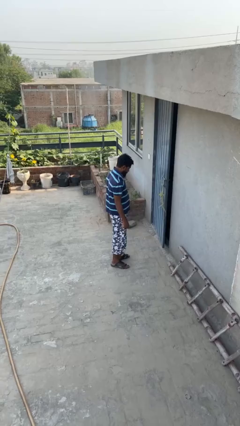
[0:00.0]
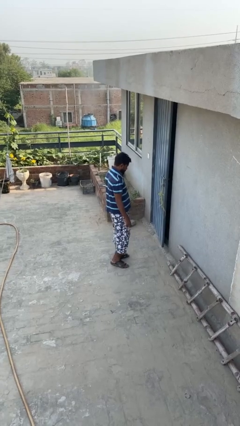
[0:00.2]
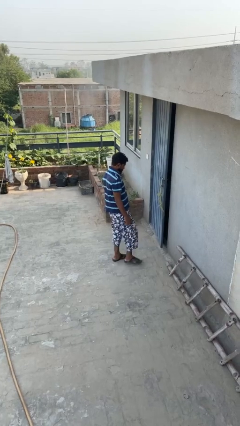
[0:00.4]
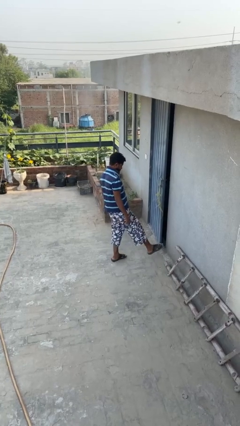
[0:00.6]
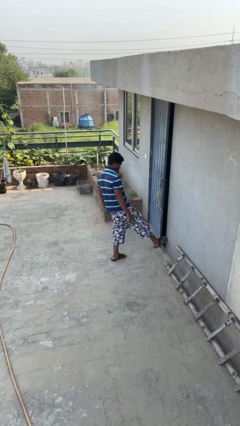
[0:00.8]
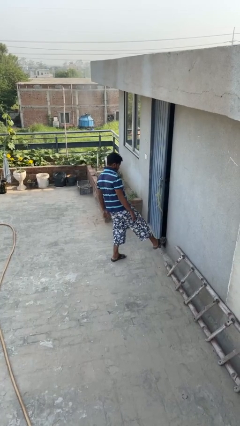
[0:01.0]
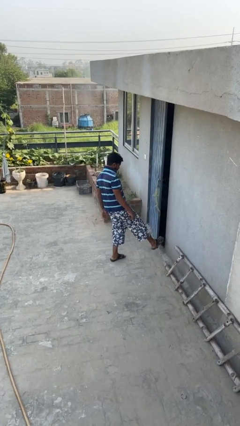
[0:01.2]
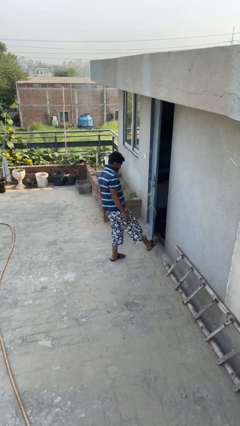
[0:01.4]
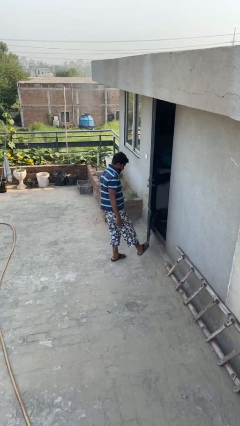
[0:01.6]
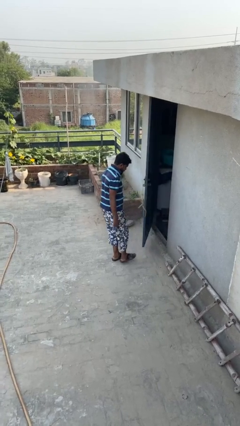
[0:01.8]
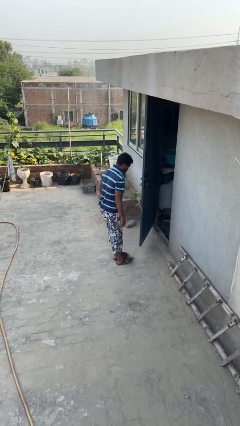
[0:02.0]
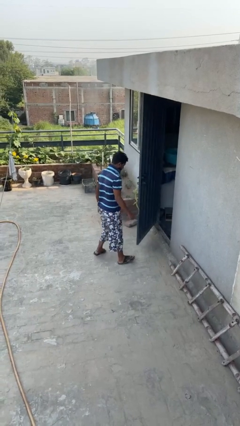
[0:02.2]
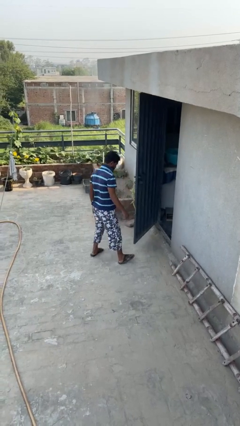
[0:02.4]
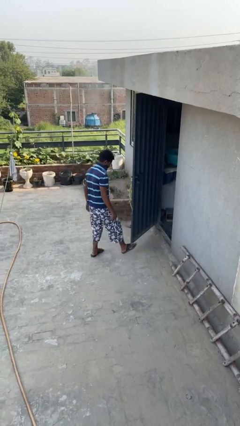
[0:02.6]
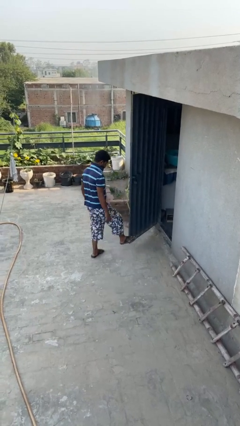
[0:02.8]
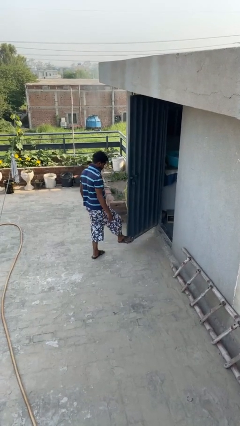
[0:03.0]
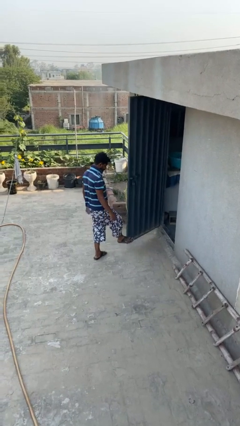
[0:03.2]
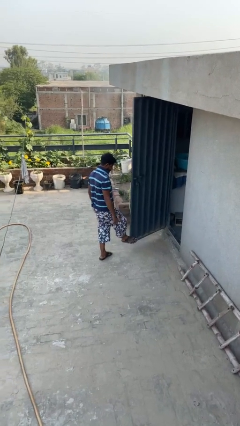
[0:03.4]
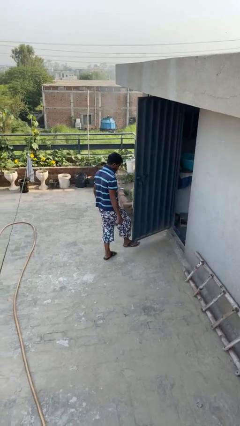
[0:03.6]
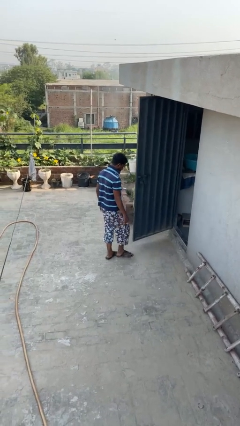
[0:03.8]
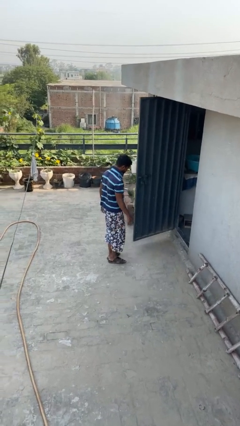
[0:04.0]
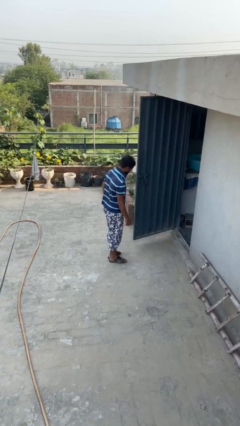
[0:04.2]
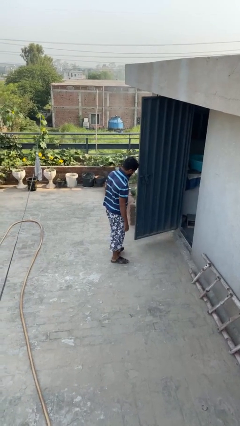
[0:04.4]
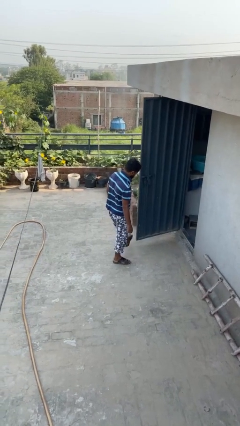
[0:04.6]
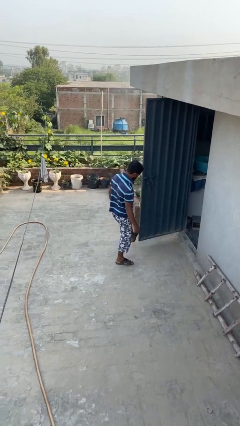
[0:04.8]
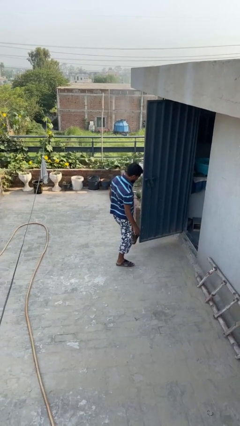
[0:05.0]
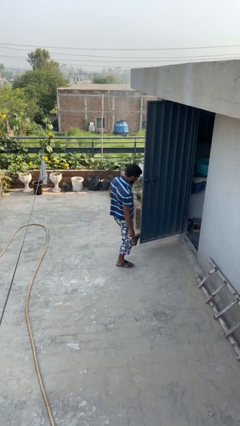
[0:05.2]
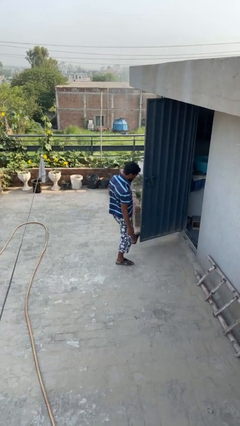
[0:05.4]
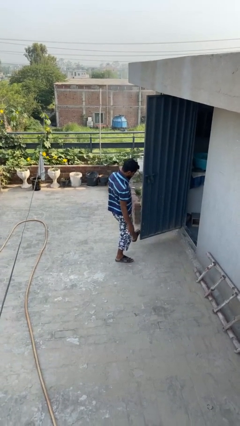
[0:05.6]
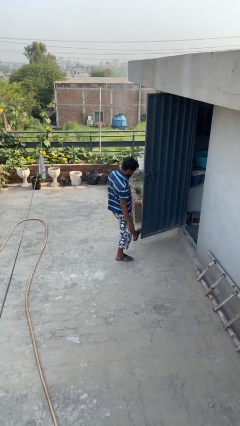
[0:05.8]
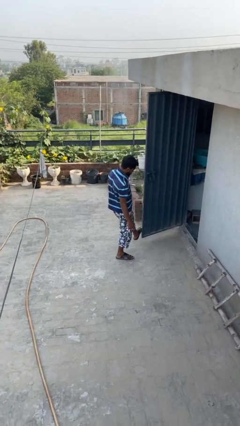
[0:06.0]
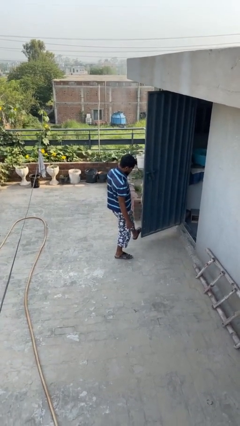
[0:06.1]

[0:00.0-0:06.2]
person opens facility door

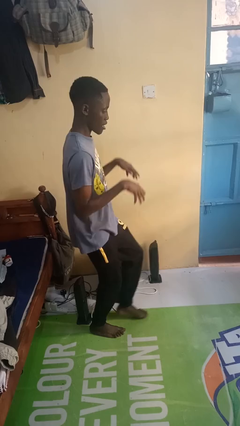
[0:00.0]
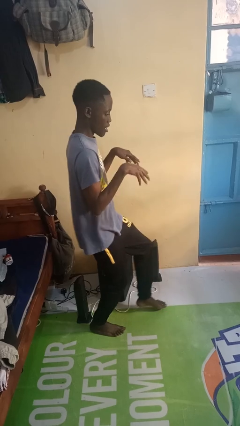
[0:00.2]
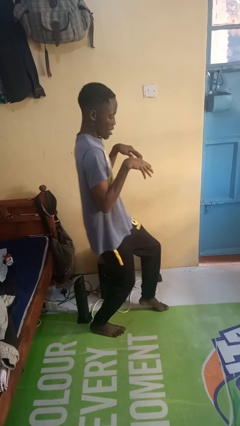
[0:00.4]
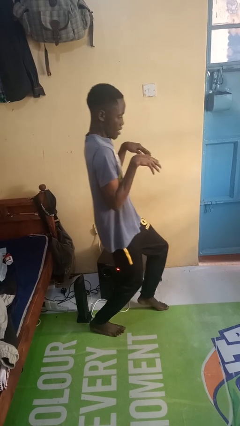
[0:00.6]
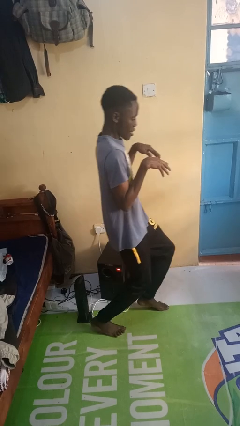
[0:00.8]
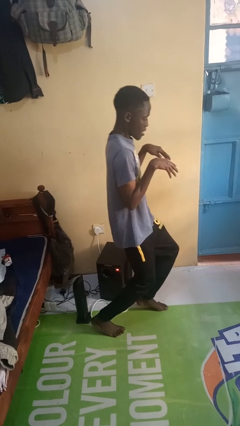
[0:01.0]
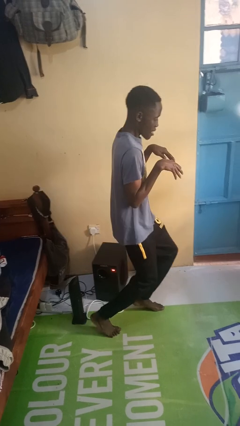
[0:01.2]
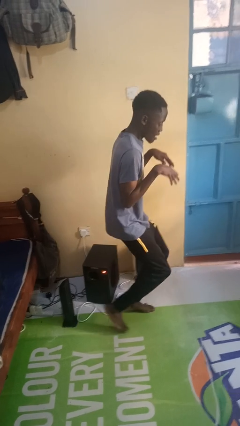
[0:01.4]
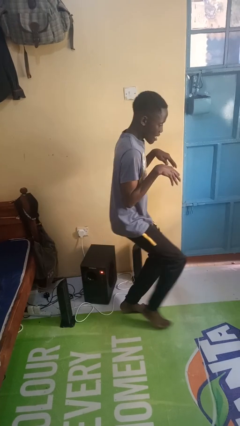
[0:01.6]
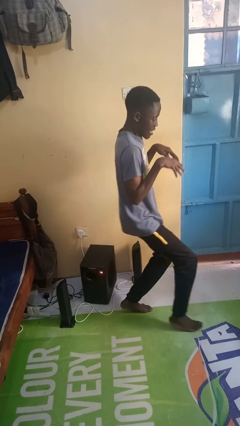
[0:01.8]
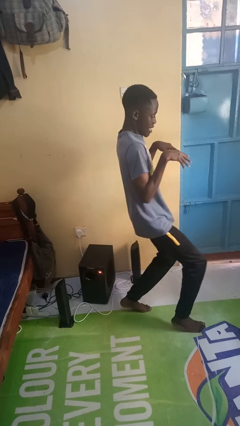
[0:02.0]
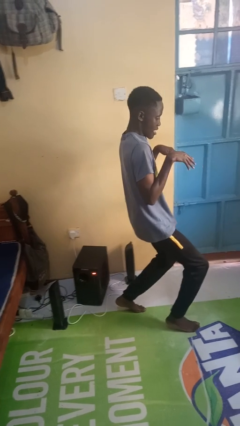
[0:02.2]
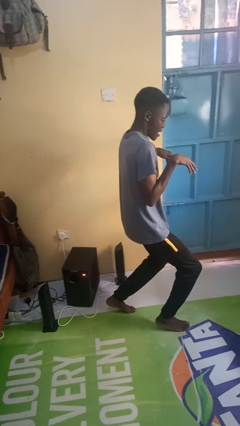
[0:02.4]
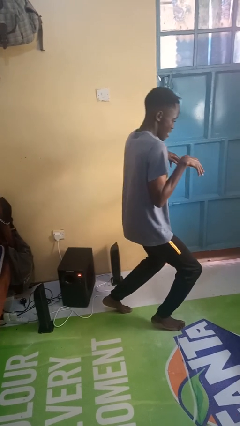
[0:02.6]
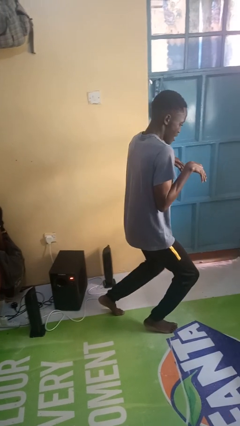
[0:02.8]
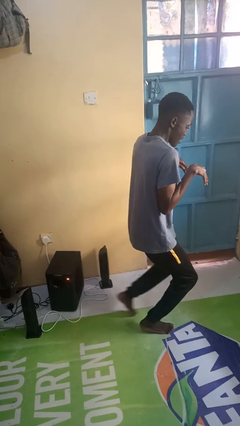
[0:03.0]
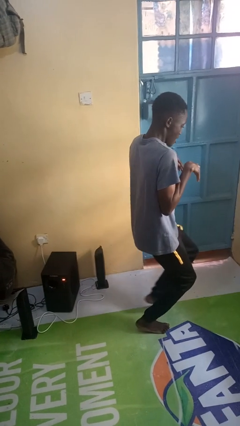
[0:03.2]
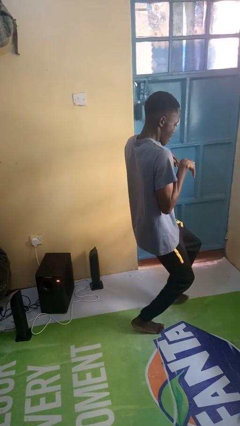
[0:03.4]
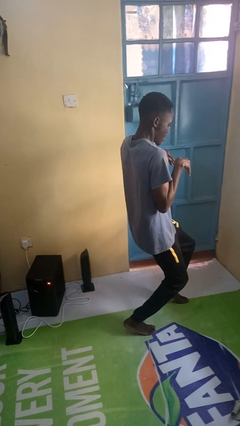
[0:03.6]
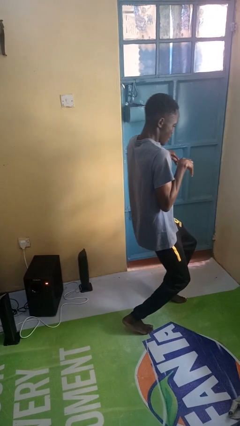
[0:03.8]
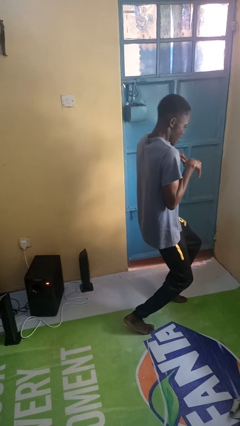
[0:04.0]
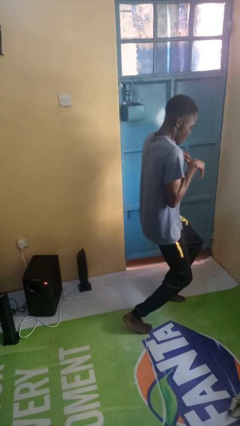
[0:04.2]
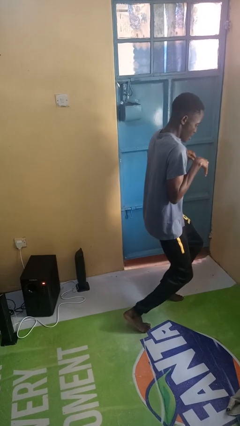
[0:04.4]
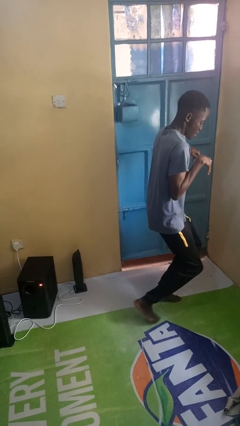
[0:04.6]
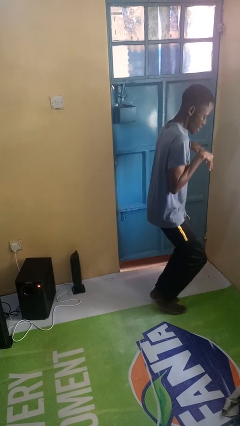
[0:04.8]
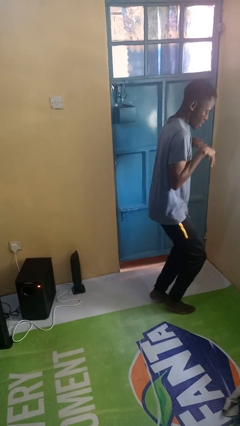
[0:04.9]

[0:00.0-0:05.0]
person walks tiptoe

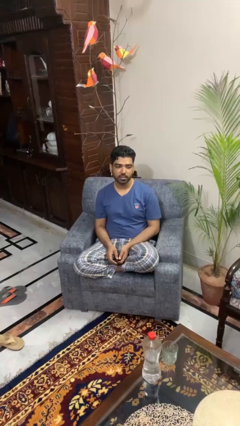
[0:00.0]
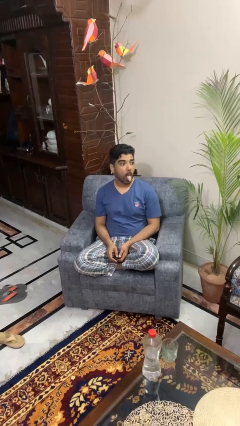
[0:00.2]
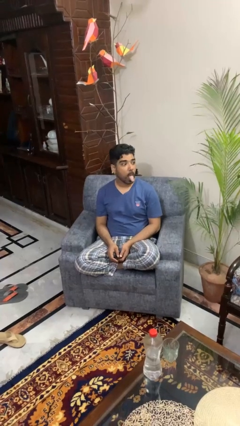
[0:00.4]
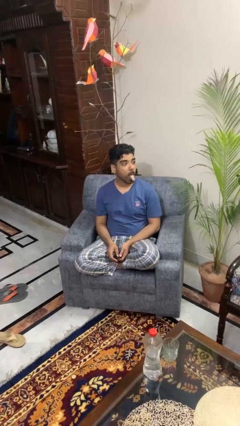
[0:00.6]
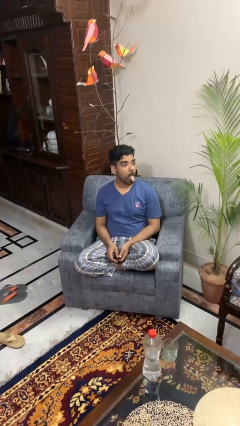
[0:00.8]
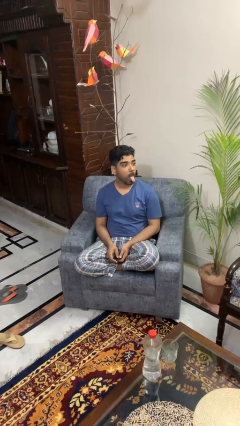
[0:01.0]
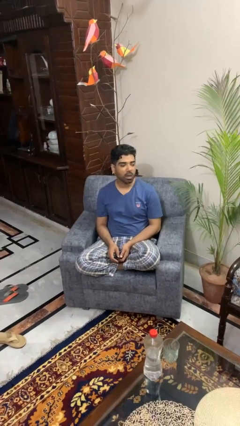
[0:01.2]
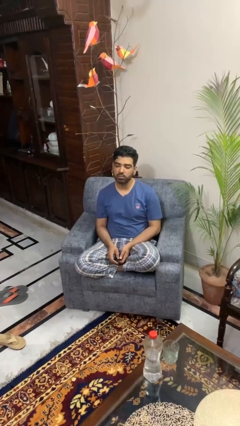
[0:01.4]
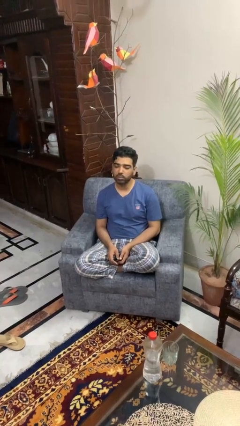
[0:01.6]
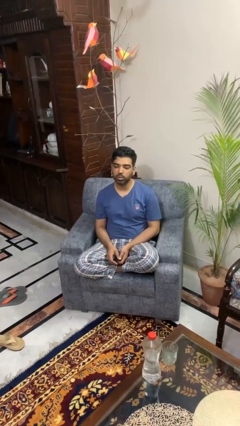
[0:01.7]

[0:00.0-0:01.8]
person sticks out tongue

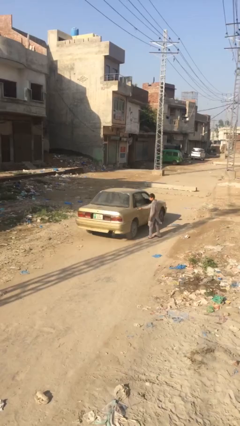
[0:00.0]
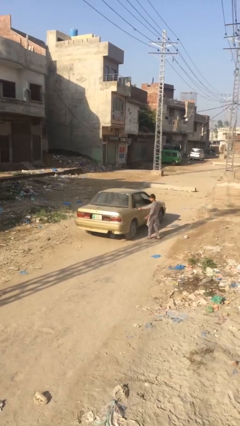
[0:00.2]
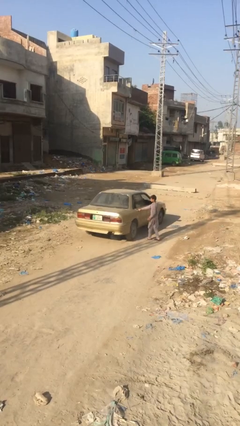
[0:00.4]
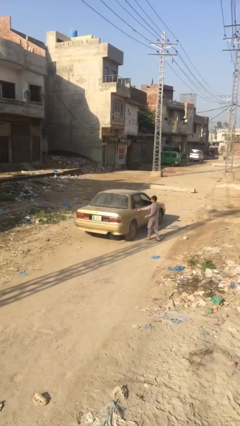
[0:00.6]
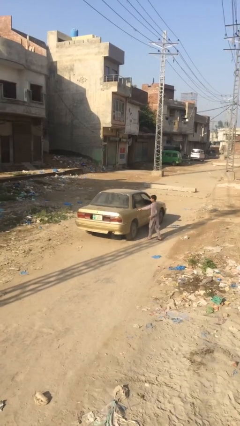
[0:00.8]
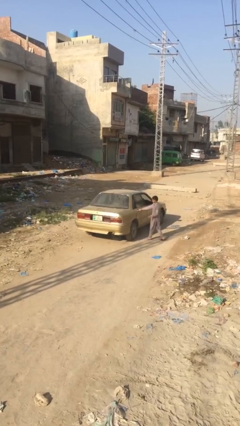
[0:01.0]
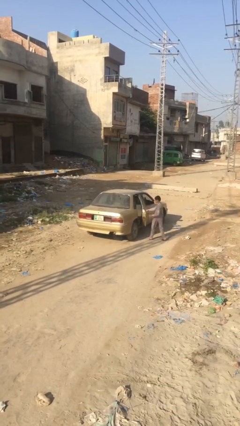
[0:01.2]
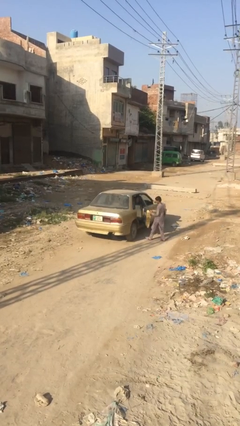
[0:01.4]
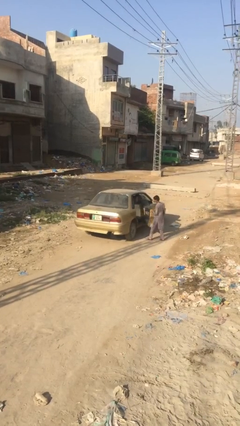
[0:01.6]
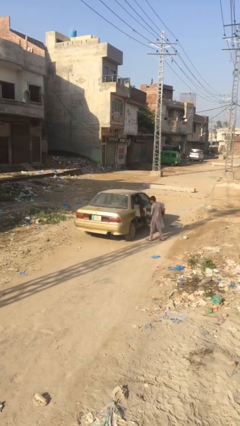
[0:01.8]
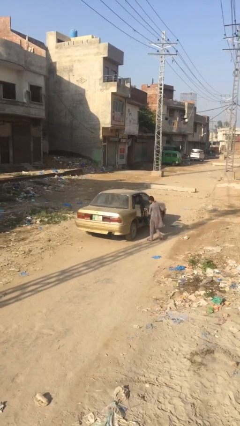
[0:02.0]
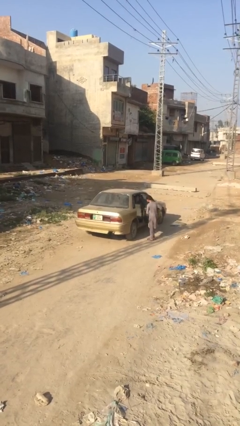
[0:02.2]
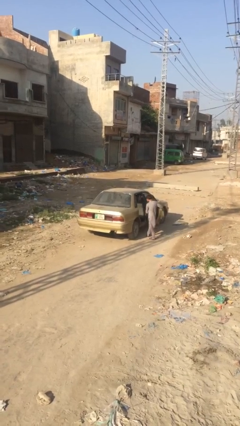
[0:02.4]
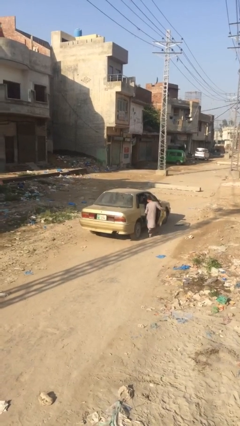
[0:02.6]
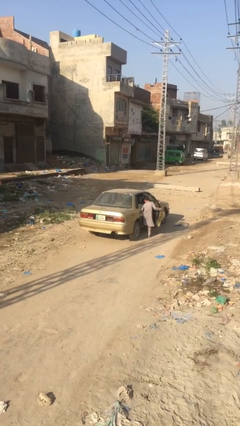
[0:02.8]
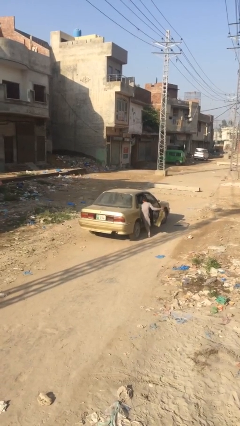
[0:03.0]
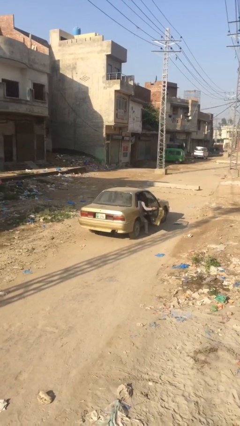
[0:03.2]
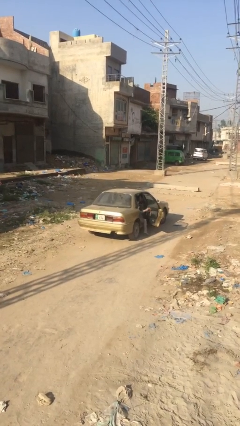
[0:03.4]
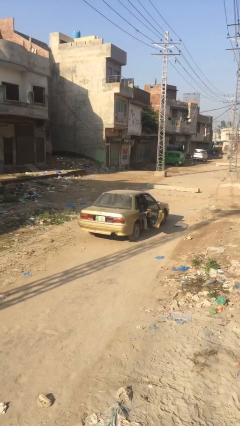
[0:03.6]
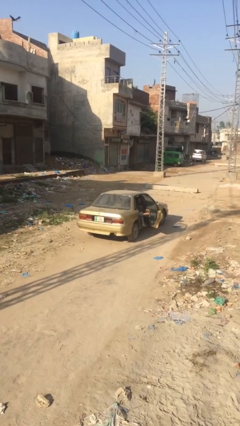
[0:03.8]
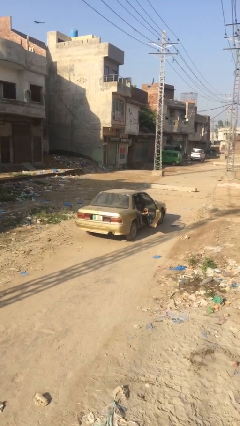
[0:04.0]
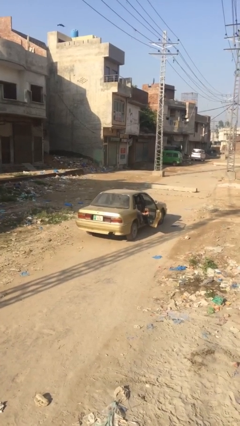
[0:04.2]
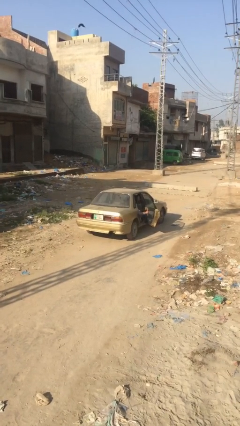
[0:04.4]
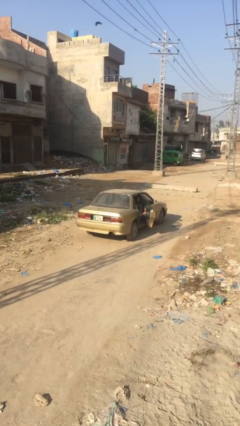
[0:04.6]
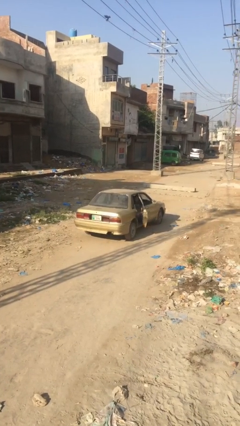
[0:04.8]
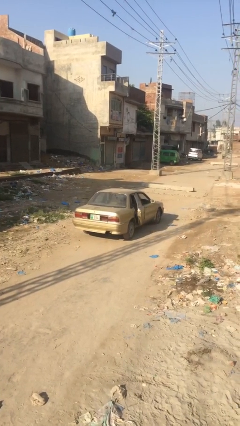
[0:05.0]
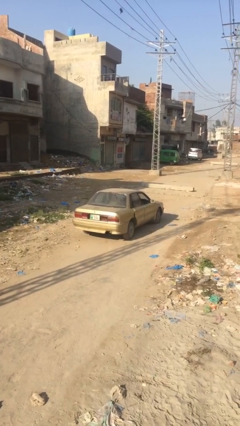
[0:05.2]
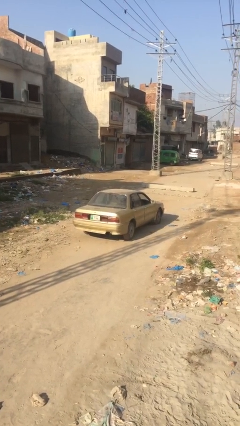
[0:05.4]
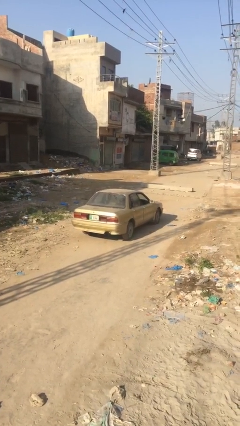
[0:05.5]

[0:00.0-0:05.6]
car picks up person
